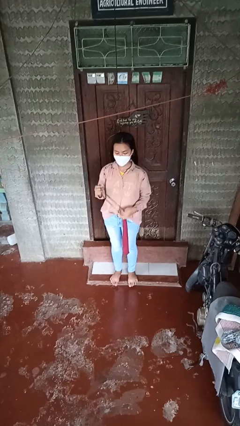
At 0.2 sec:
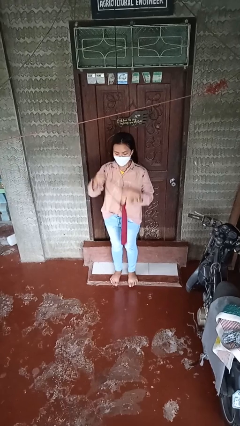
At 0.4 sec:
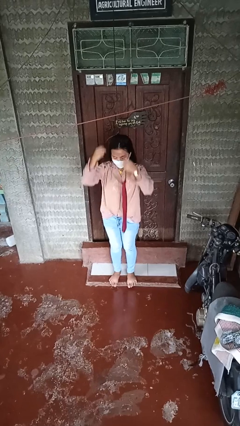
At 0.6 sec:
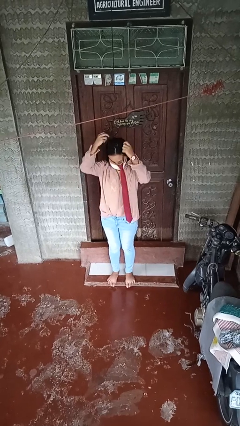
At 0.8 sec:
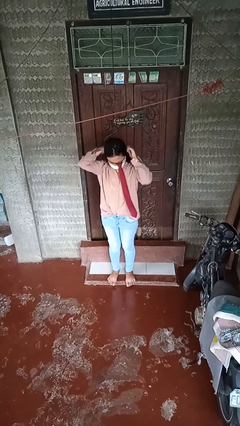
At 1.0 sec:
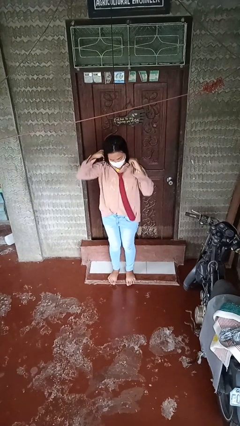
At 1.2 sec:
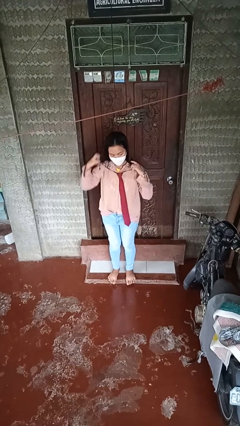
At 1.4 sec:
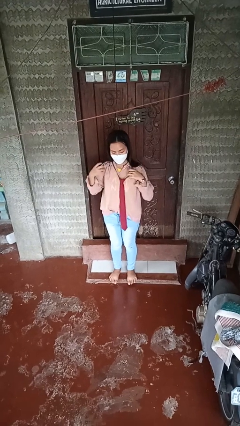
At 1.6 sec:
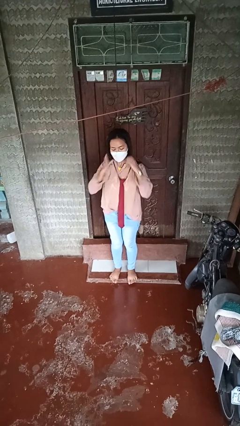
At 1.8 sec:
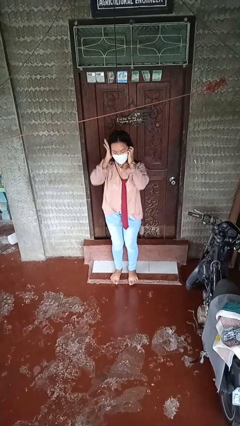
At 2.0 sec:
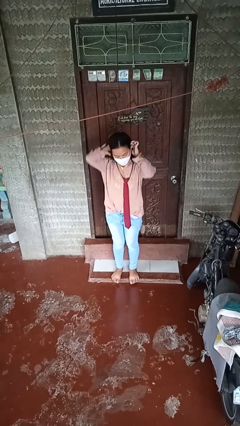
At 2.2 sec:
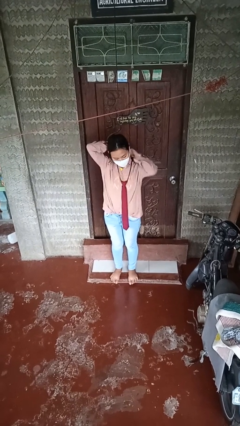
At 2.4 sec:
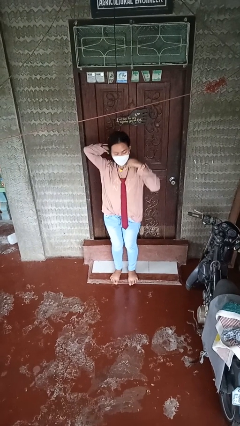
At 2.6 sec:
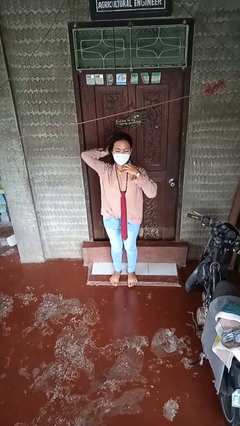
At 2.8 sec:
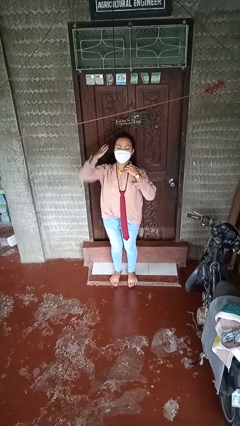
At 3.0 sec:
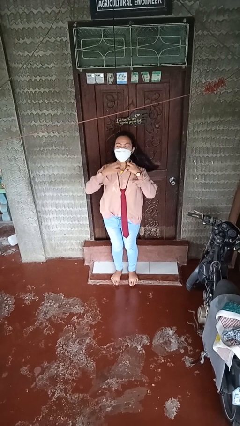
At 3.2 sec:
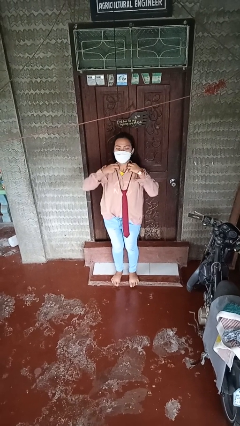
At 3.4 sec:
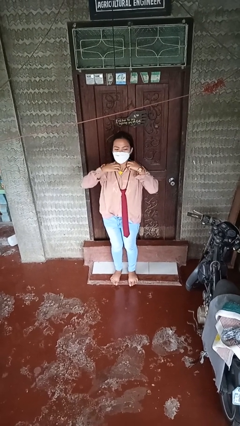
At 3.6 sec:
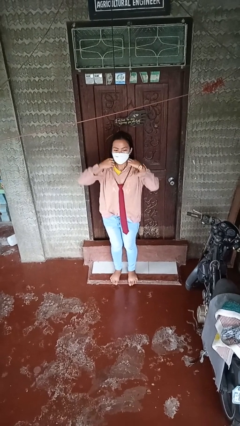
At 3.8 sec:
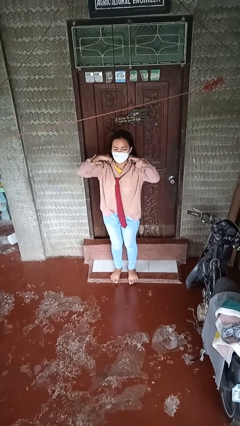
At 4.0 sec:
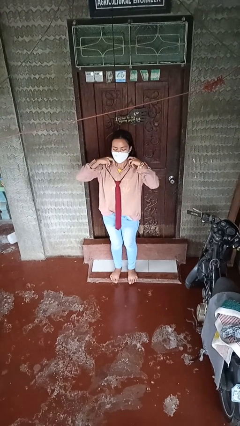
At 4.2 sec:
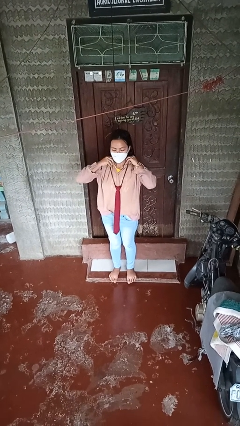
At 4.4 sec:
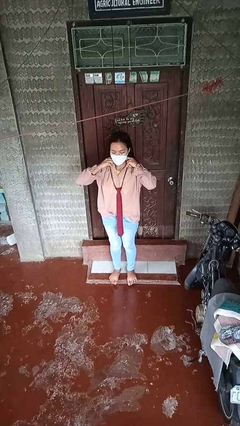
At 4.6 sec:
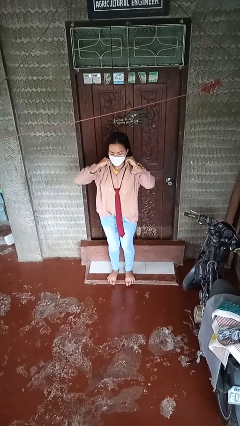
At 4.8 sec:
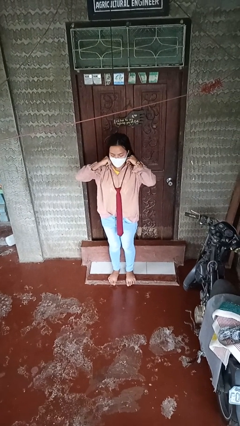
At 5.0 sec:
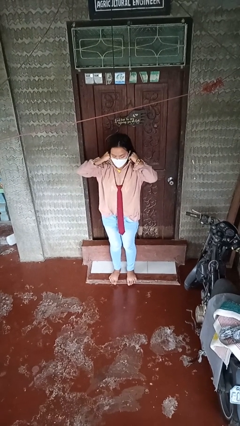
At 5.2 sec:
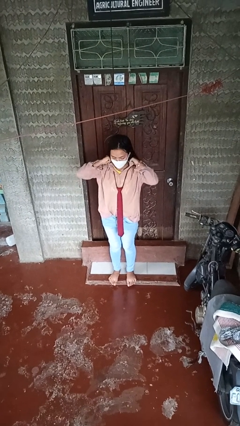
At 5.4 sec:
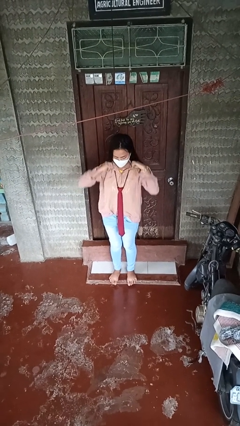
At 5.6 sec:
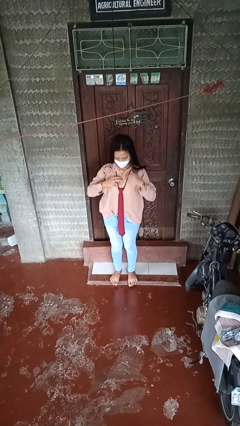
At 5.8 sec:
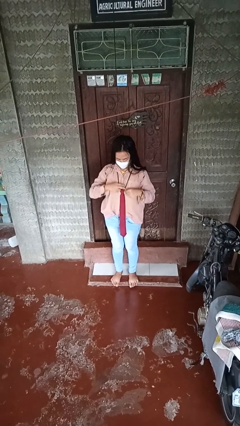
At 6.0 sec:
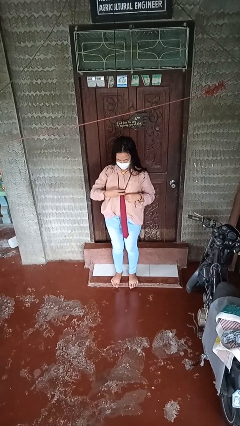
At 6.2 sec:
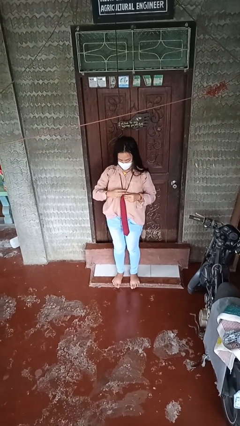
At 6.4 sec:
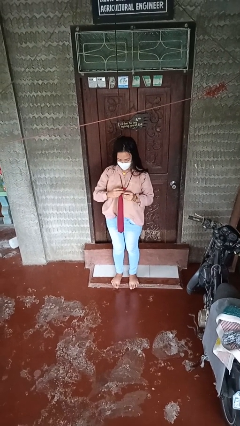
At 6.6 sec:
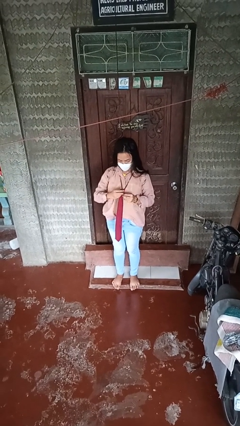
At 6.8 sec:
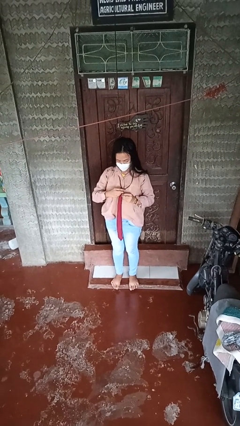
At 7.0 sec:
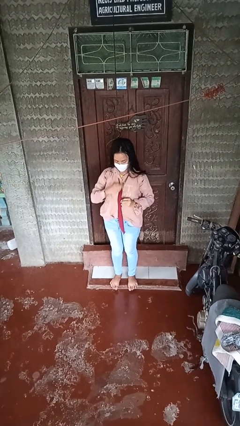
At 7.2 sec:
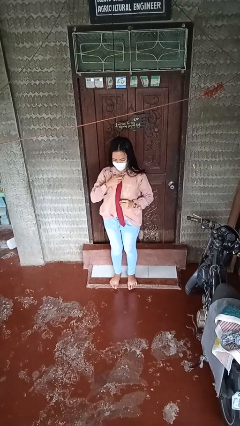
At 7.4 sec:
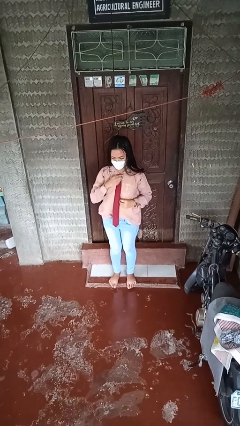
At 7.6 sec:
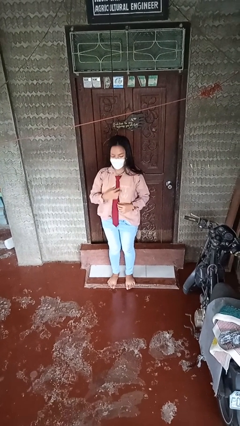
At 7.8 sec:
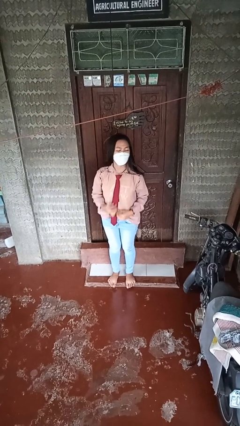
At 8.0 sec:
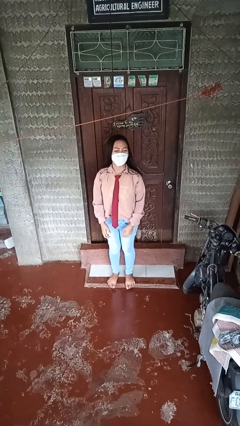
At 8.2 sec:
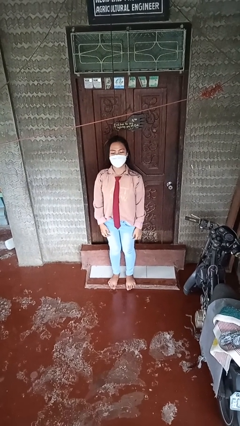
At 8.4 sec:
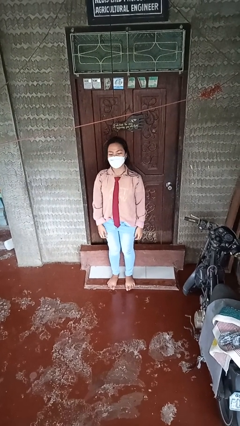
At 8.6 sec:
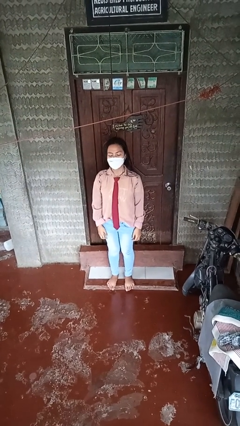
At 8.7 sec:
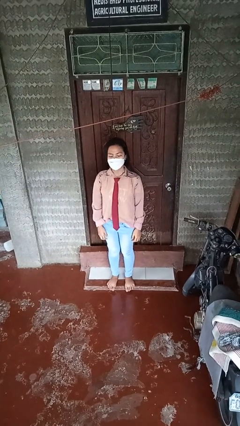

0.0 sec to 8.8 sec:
person puts on necktie

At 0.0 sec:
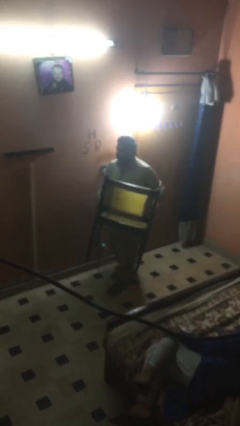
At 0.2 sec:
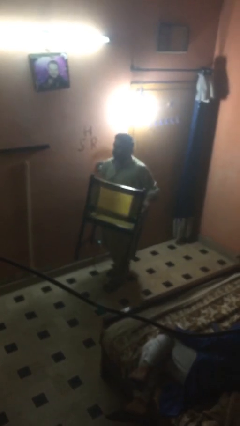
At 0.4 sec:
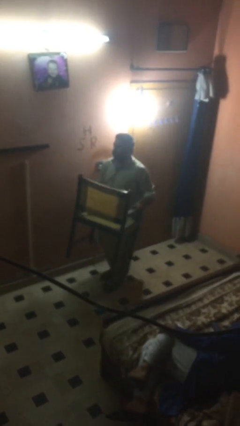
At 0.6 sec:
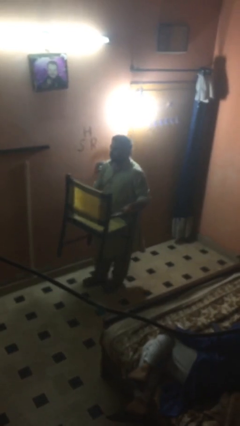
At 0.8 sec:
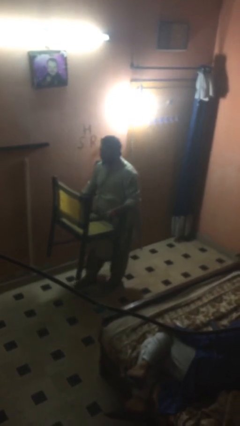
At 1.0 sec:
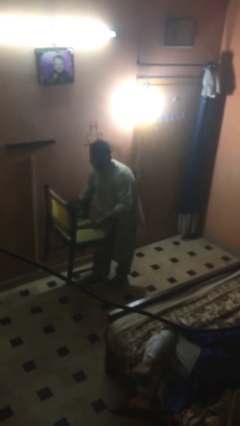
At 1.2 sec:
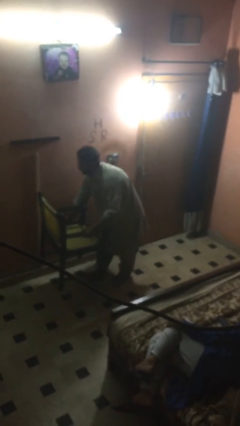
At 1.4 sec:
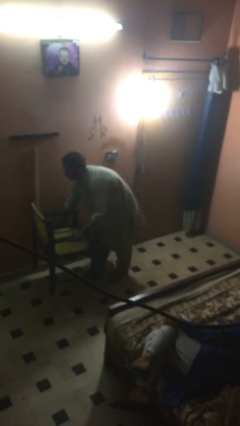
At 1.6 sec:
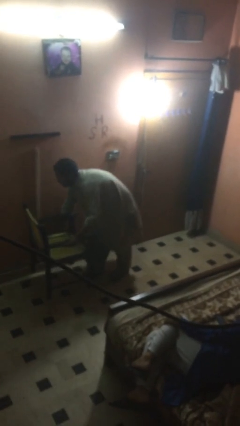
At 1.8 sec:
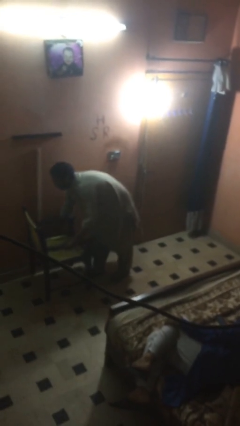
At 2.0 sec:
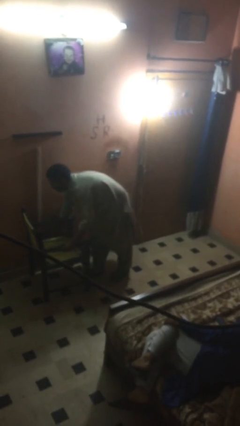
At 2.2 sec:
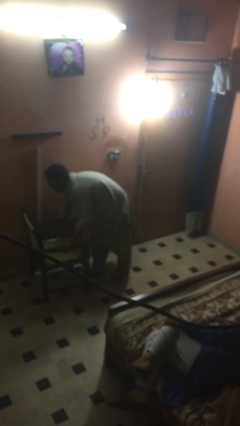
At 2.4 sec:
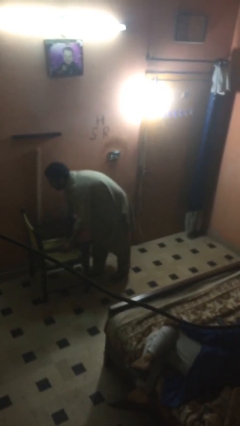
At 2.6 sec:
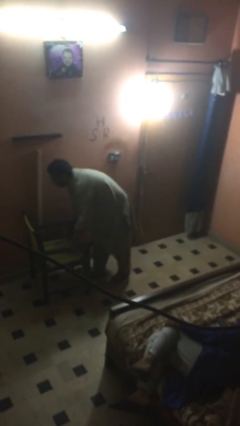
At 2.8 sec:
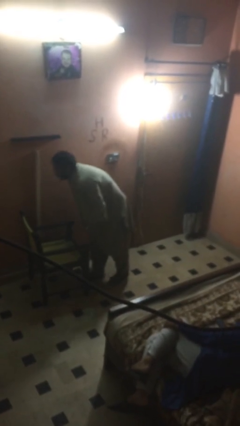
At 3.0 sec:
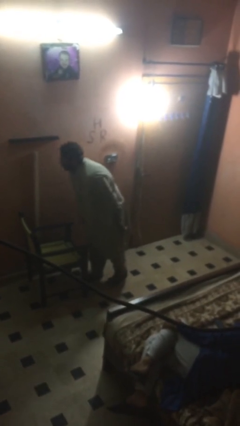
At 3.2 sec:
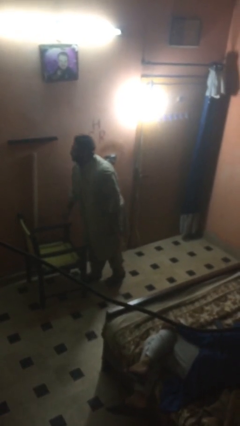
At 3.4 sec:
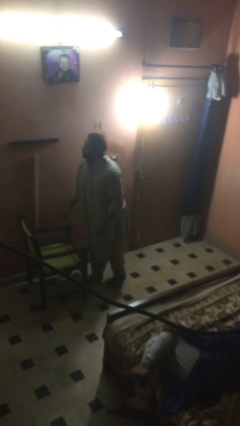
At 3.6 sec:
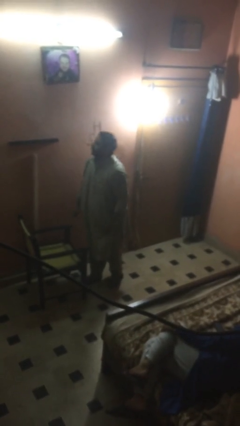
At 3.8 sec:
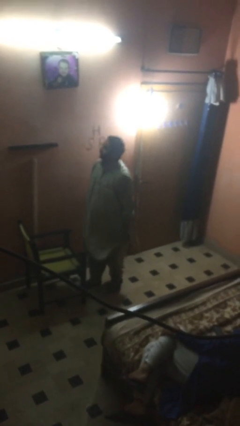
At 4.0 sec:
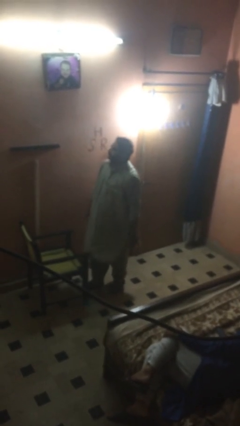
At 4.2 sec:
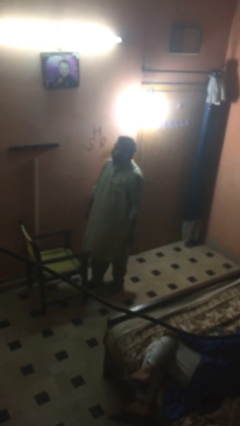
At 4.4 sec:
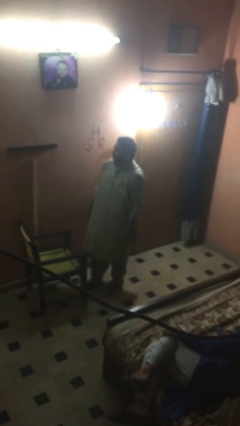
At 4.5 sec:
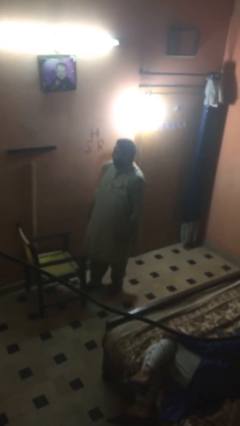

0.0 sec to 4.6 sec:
person puts down object on floor

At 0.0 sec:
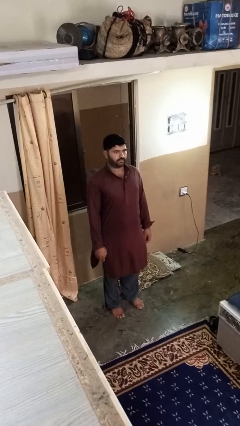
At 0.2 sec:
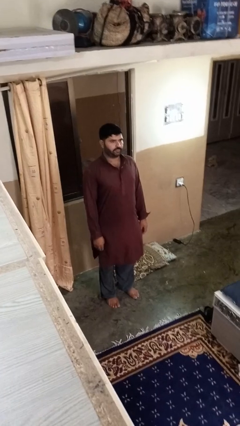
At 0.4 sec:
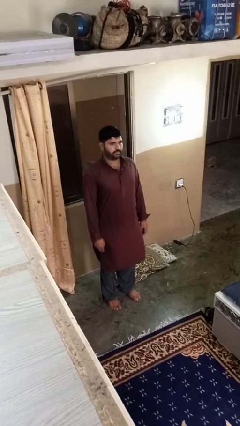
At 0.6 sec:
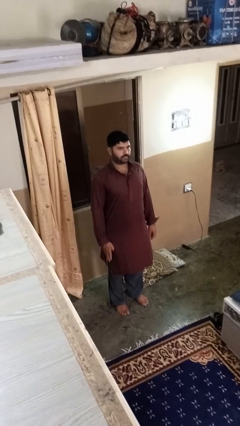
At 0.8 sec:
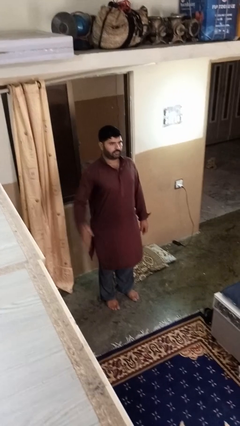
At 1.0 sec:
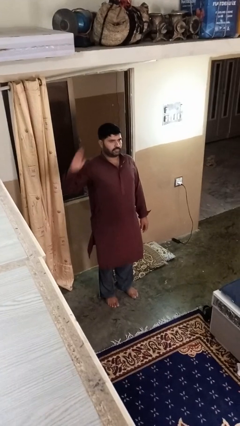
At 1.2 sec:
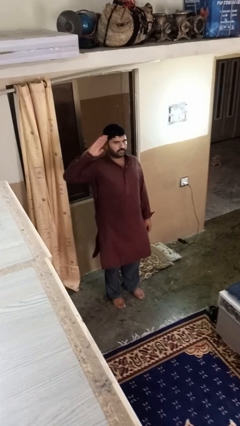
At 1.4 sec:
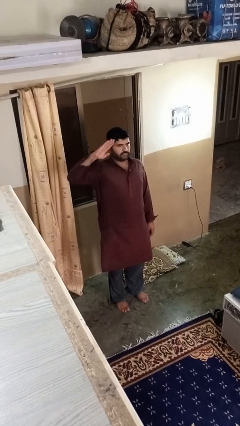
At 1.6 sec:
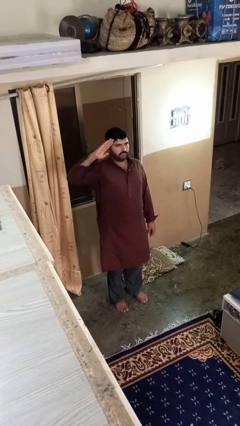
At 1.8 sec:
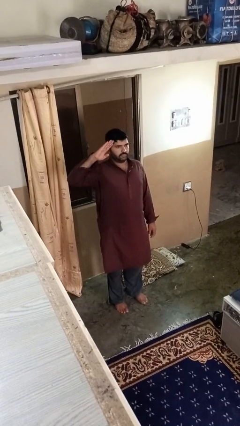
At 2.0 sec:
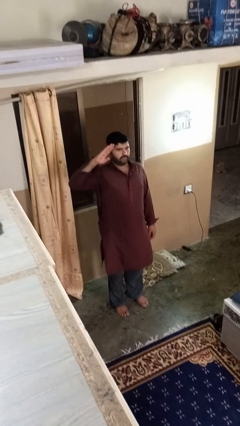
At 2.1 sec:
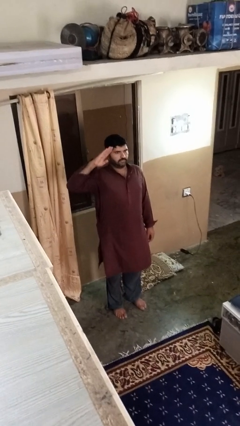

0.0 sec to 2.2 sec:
person salutes

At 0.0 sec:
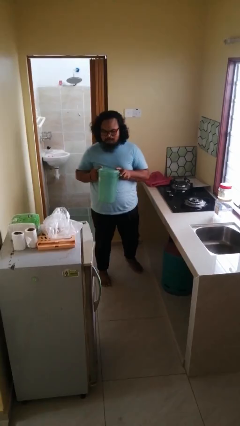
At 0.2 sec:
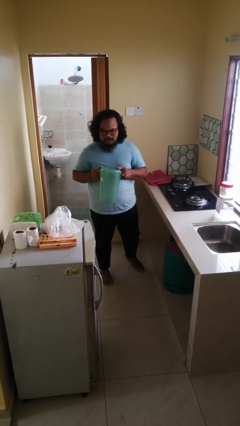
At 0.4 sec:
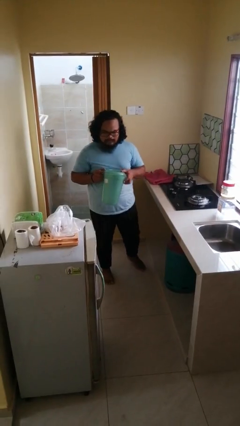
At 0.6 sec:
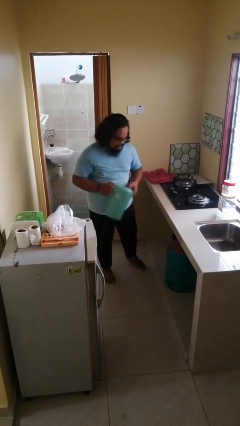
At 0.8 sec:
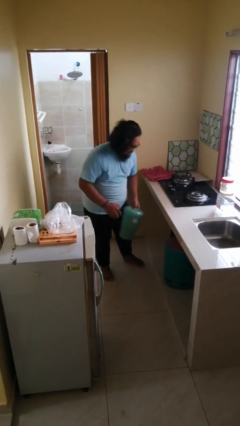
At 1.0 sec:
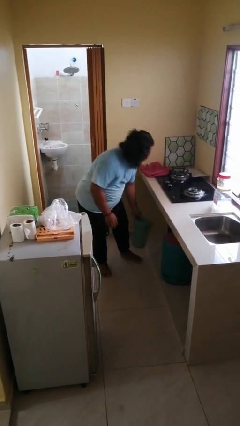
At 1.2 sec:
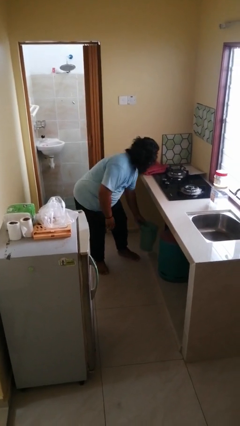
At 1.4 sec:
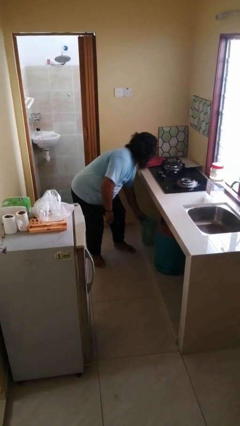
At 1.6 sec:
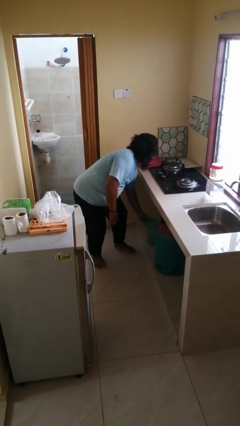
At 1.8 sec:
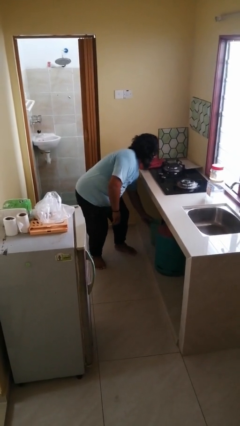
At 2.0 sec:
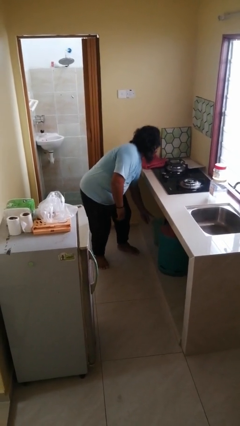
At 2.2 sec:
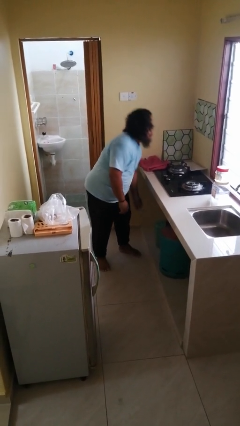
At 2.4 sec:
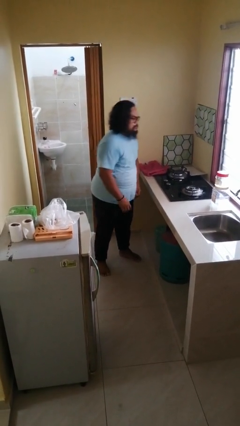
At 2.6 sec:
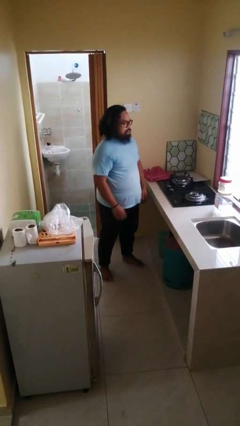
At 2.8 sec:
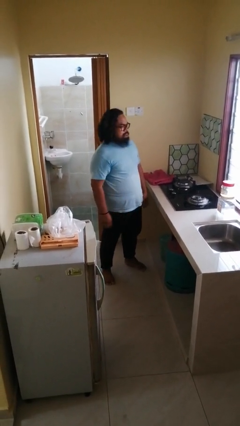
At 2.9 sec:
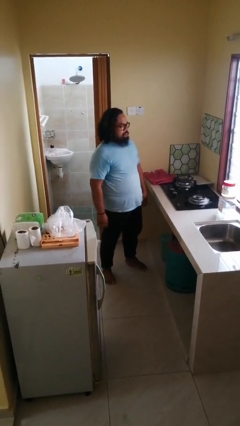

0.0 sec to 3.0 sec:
person puts down object into cabinet
